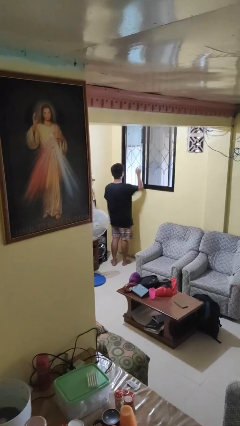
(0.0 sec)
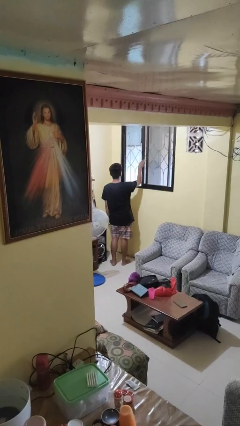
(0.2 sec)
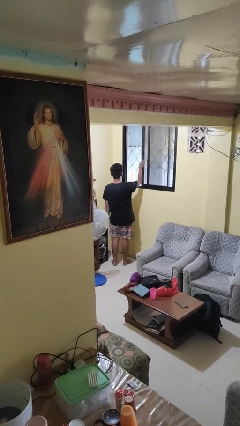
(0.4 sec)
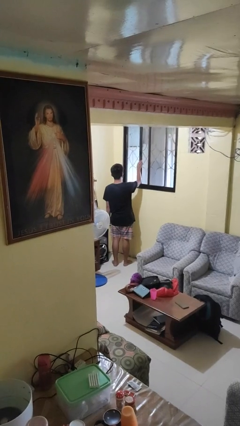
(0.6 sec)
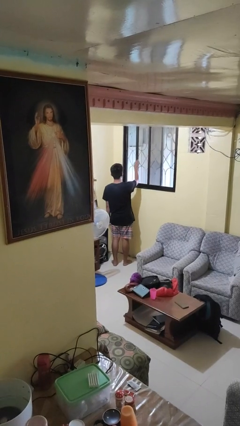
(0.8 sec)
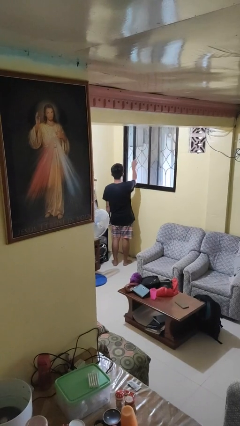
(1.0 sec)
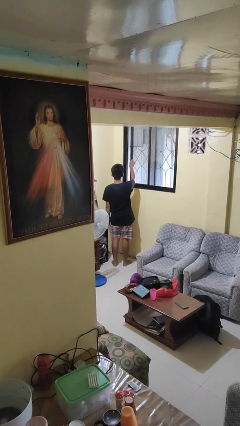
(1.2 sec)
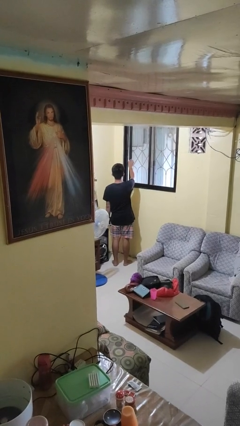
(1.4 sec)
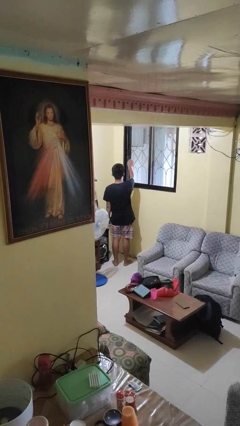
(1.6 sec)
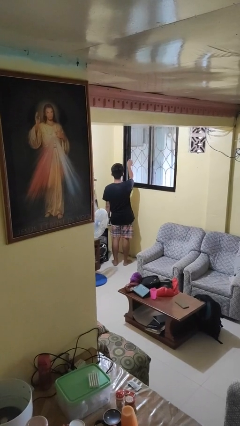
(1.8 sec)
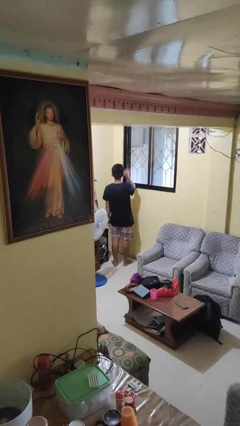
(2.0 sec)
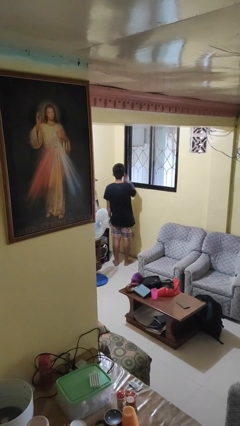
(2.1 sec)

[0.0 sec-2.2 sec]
person closes home window

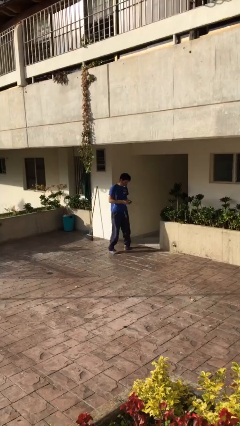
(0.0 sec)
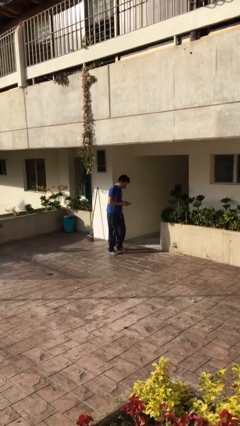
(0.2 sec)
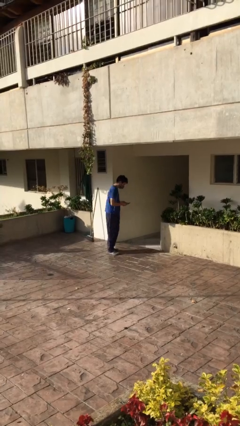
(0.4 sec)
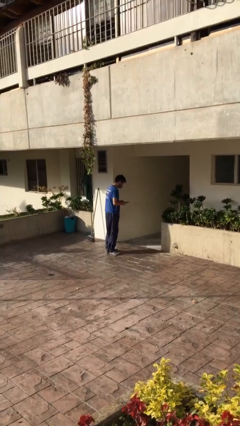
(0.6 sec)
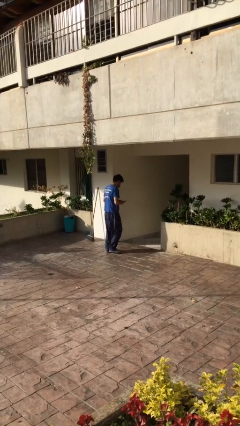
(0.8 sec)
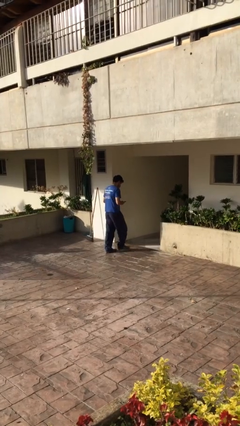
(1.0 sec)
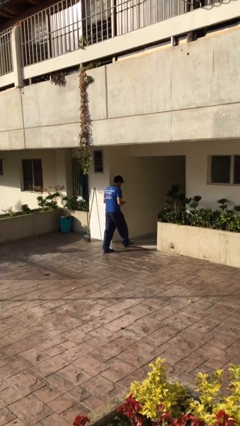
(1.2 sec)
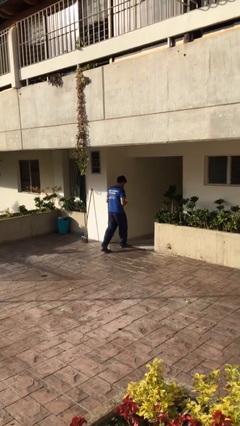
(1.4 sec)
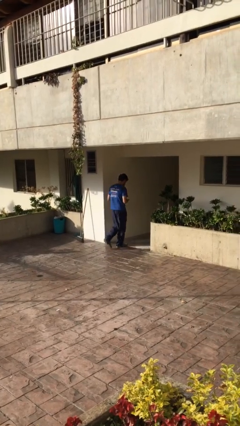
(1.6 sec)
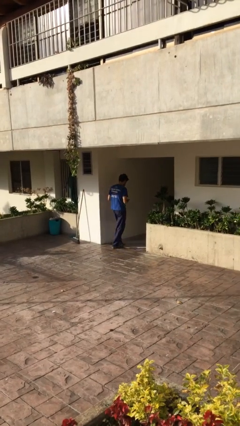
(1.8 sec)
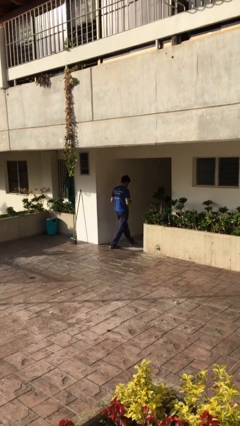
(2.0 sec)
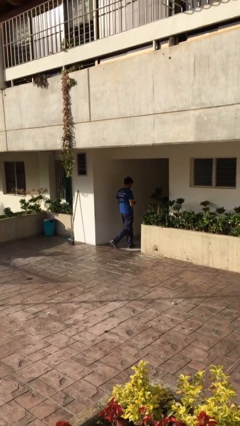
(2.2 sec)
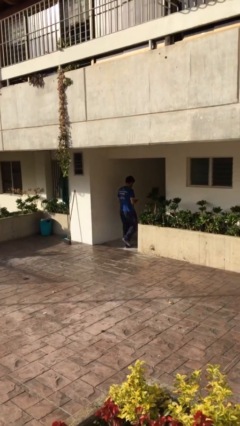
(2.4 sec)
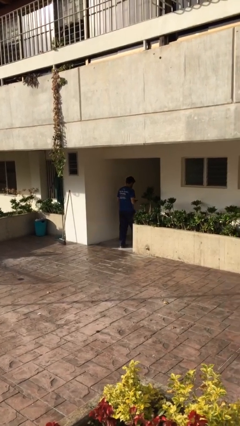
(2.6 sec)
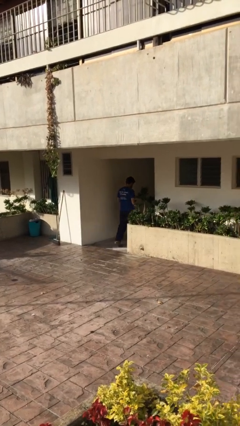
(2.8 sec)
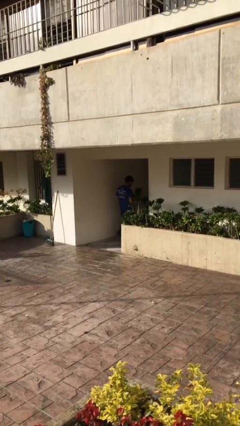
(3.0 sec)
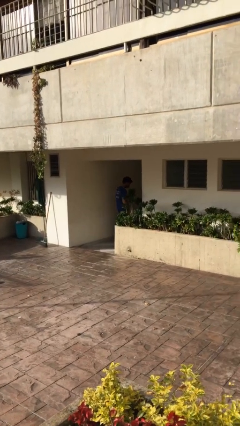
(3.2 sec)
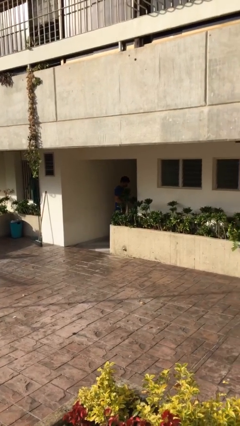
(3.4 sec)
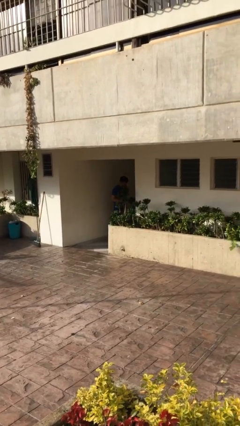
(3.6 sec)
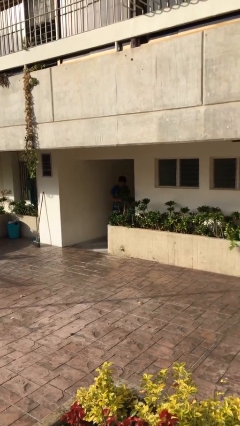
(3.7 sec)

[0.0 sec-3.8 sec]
person exits scene through structure

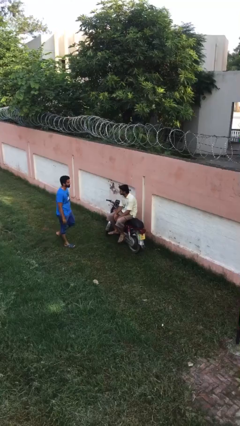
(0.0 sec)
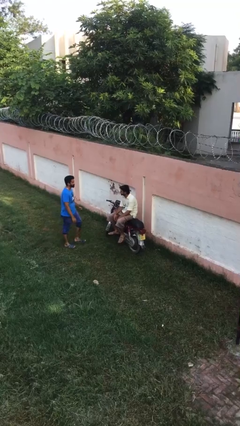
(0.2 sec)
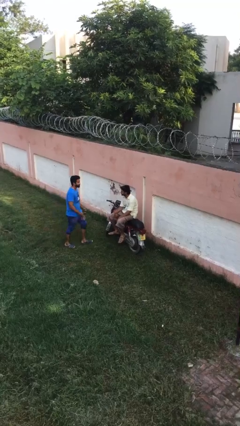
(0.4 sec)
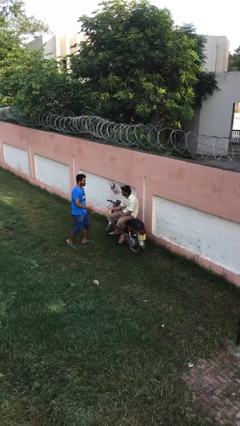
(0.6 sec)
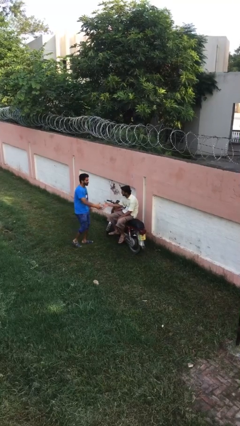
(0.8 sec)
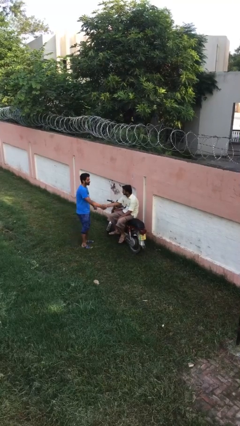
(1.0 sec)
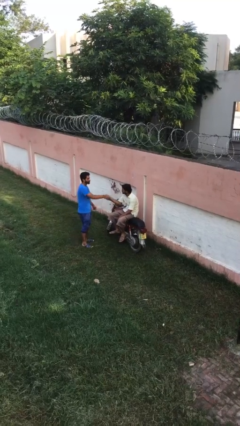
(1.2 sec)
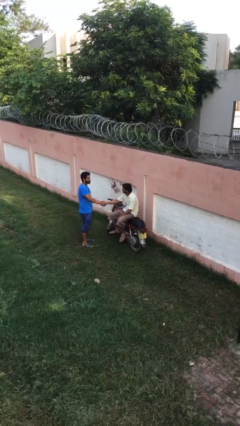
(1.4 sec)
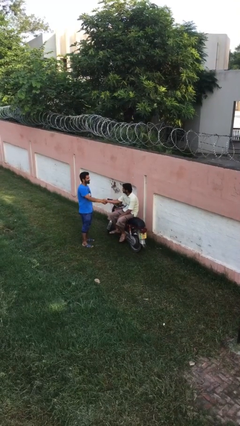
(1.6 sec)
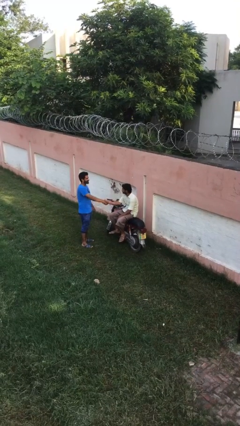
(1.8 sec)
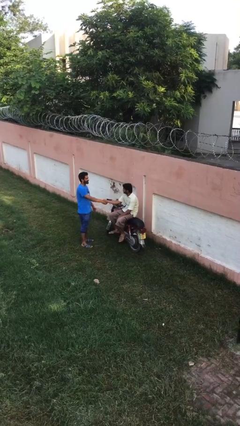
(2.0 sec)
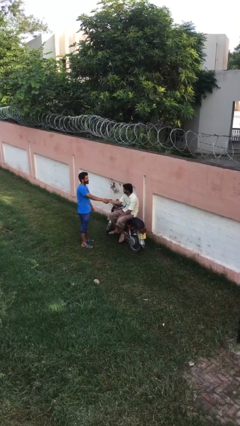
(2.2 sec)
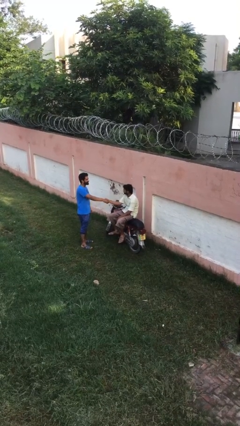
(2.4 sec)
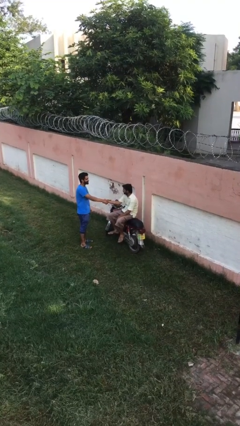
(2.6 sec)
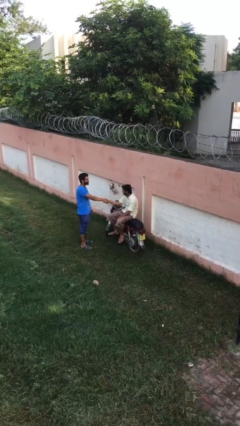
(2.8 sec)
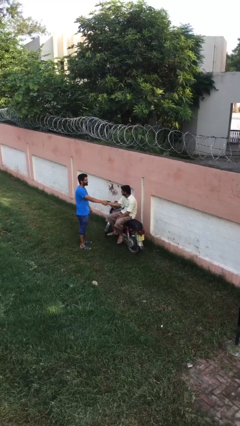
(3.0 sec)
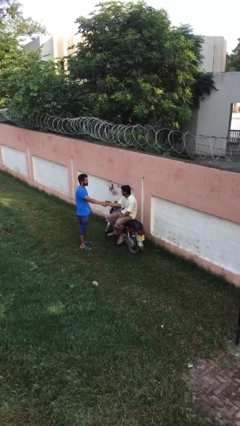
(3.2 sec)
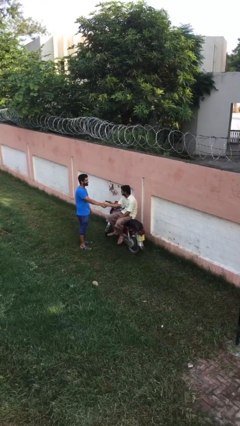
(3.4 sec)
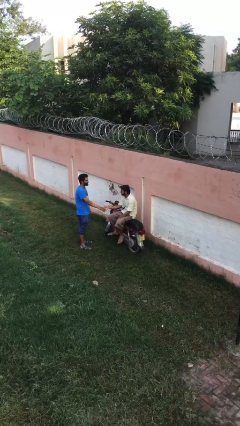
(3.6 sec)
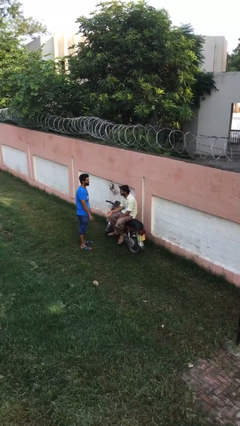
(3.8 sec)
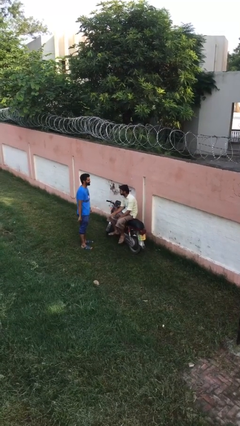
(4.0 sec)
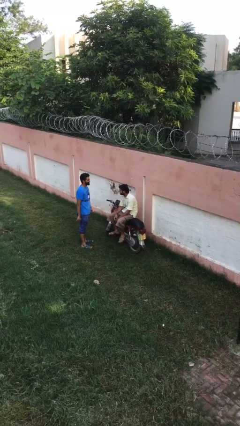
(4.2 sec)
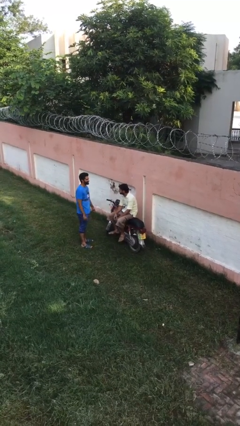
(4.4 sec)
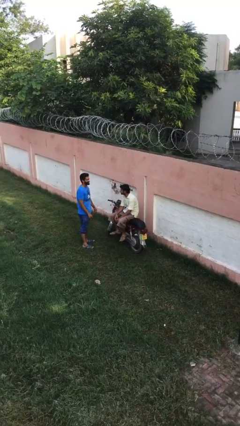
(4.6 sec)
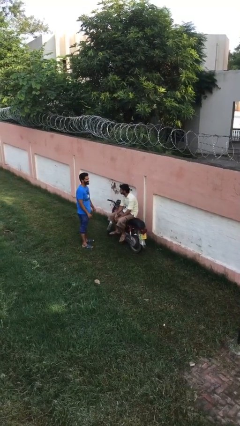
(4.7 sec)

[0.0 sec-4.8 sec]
person shakes hand

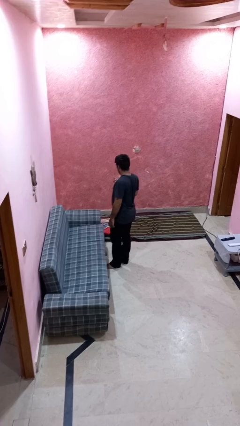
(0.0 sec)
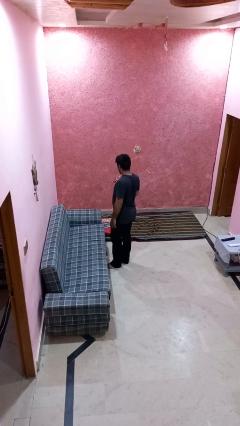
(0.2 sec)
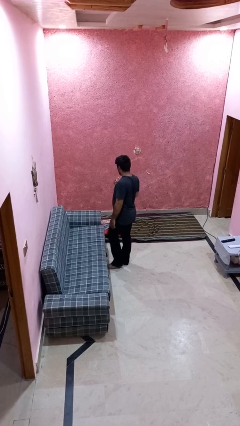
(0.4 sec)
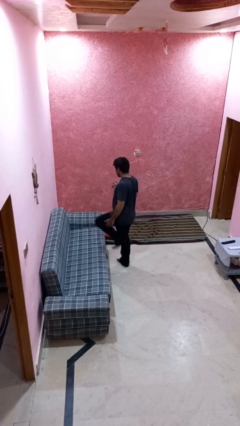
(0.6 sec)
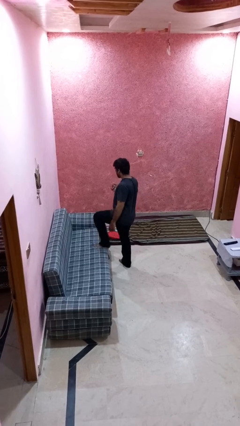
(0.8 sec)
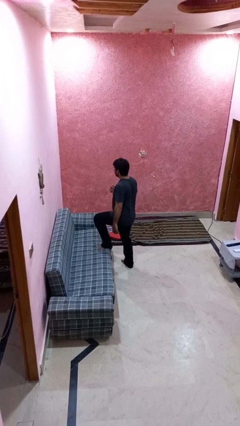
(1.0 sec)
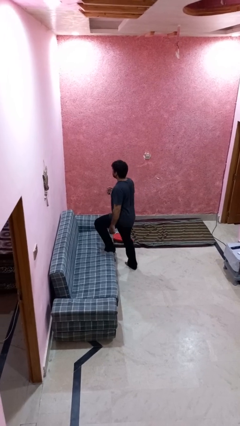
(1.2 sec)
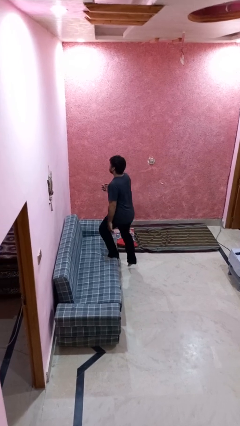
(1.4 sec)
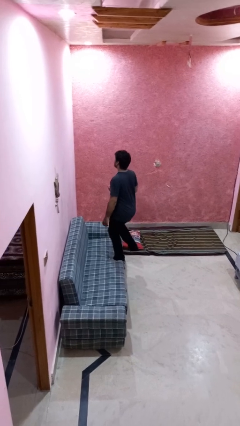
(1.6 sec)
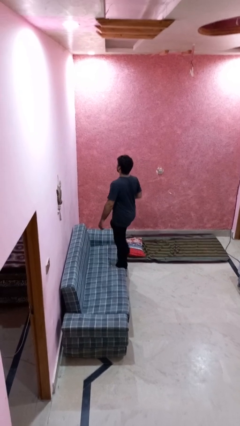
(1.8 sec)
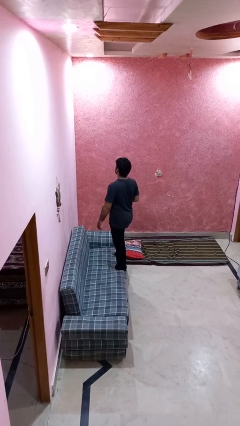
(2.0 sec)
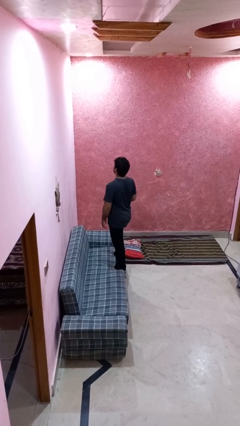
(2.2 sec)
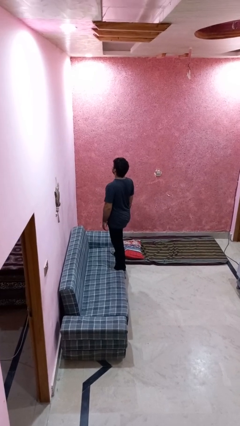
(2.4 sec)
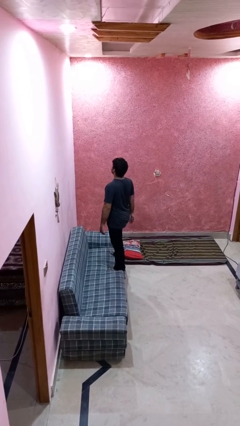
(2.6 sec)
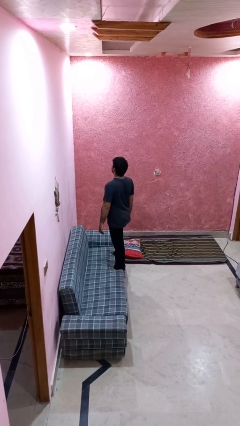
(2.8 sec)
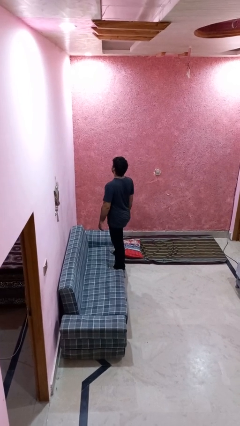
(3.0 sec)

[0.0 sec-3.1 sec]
person climbs on couch

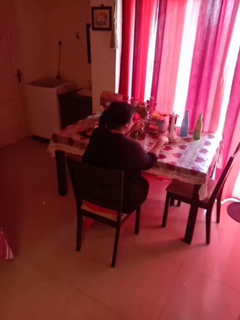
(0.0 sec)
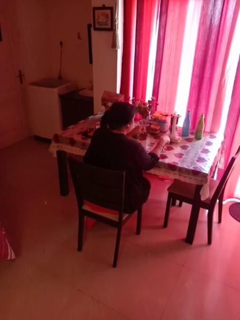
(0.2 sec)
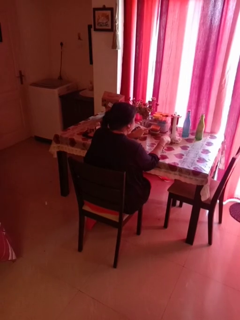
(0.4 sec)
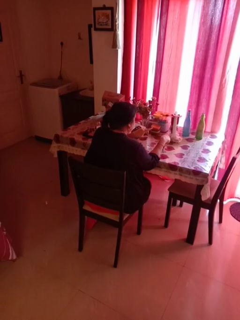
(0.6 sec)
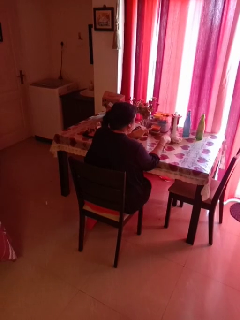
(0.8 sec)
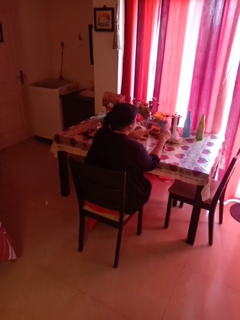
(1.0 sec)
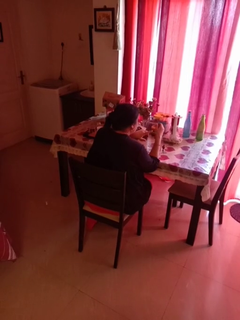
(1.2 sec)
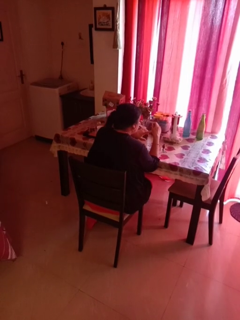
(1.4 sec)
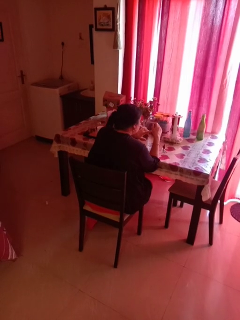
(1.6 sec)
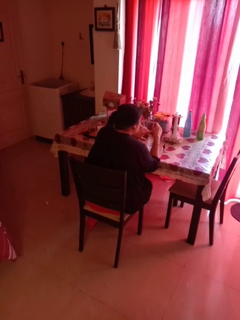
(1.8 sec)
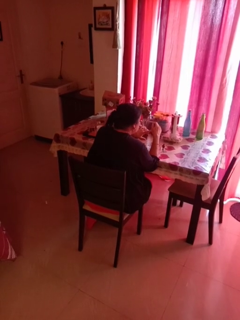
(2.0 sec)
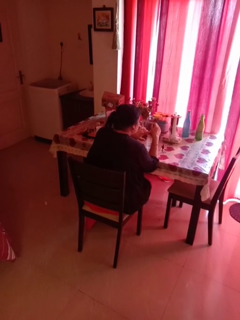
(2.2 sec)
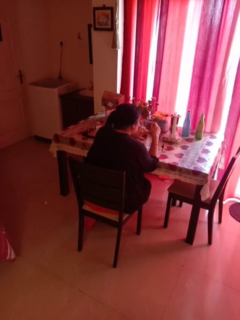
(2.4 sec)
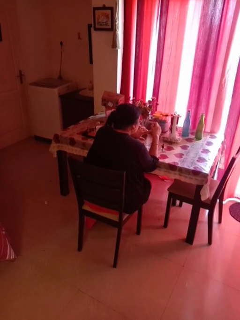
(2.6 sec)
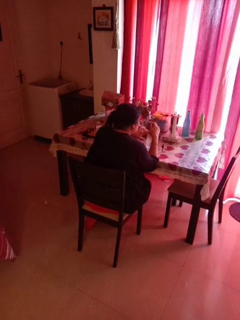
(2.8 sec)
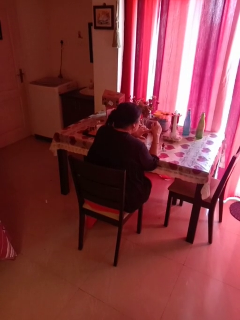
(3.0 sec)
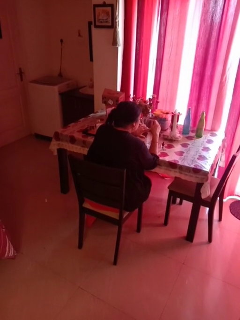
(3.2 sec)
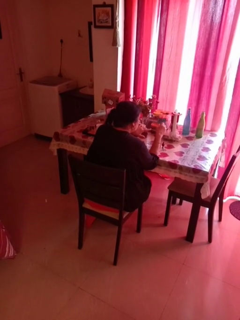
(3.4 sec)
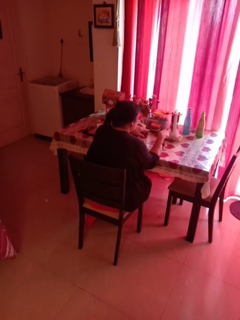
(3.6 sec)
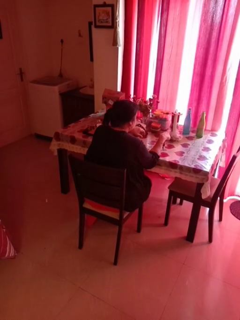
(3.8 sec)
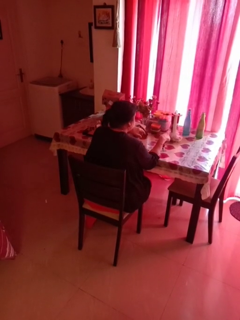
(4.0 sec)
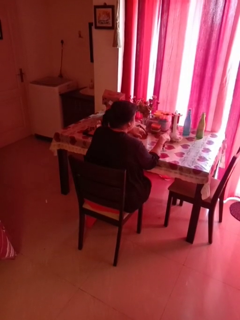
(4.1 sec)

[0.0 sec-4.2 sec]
person paints fingernails

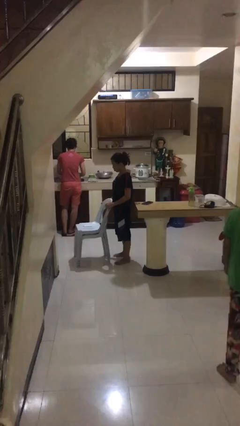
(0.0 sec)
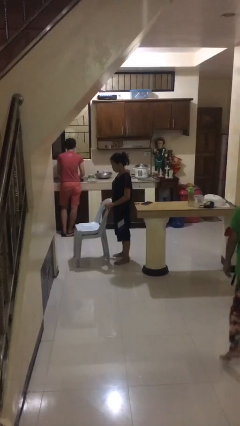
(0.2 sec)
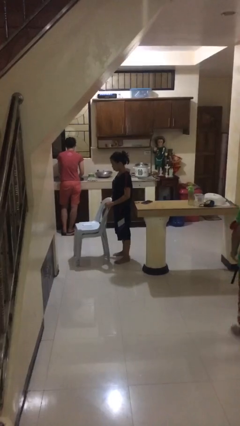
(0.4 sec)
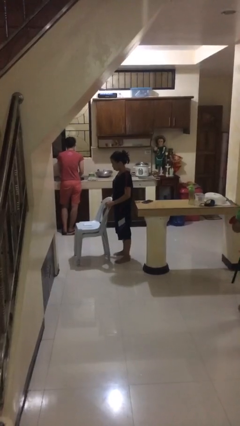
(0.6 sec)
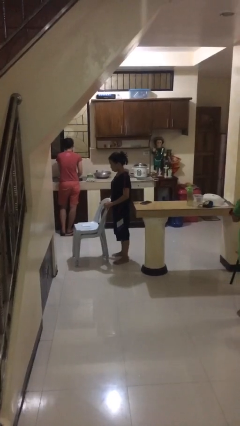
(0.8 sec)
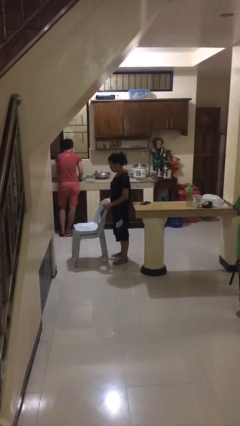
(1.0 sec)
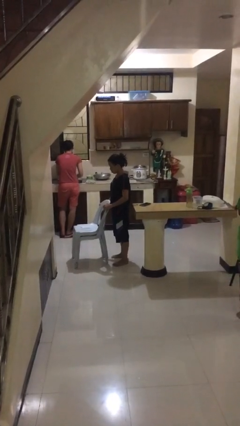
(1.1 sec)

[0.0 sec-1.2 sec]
person picks up object from floor
